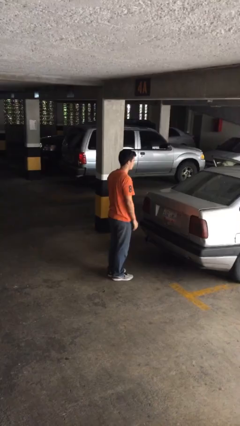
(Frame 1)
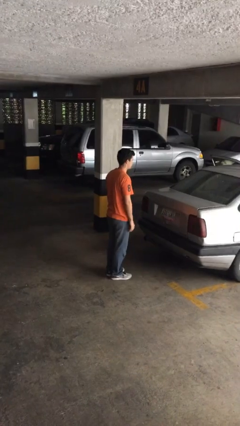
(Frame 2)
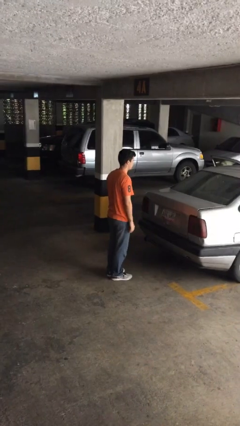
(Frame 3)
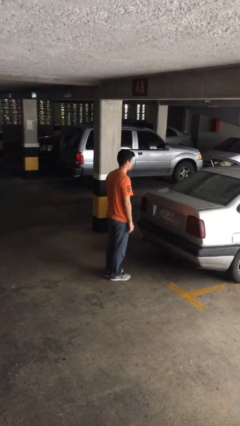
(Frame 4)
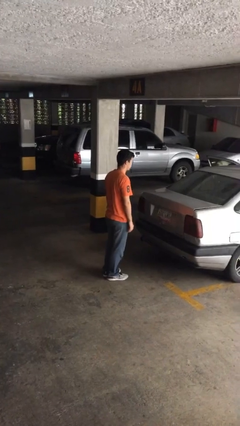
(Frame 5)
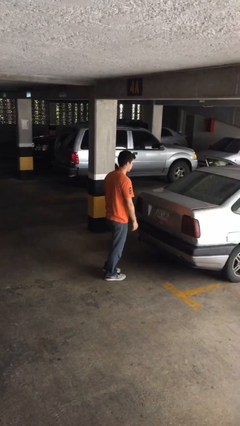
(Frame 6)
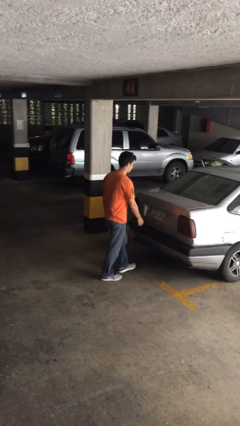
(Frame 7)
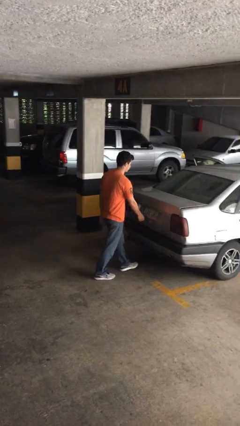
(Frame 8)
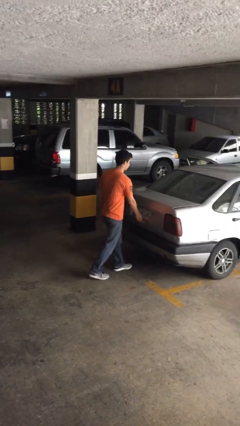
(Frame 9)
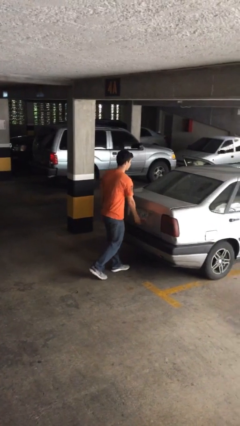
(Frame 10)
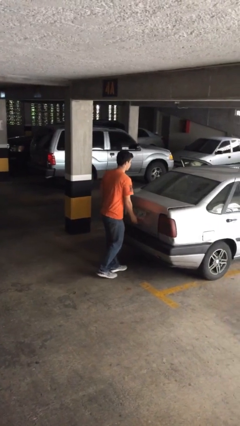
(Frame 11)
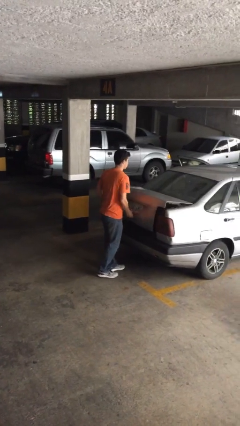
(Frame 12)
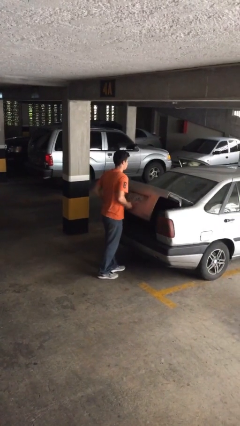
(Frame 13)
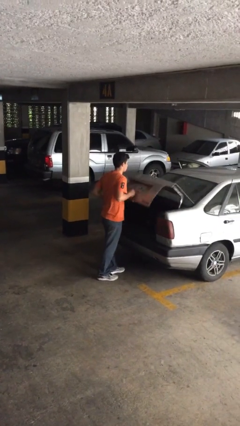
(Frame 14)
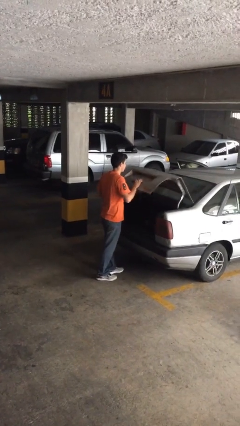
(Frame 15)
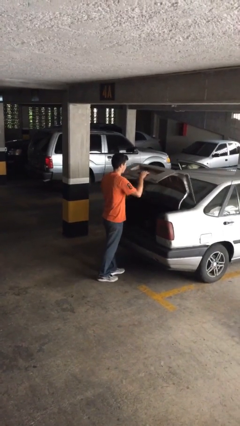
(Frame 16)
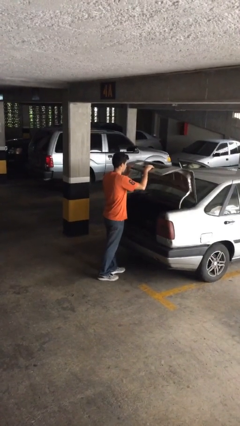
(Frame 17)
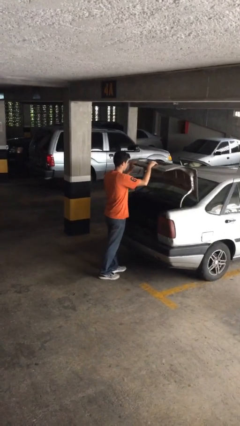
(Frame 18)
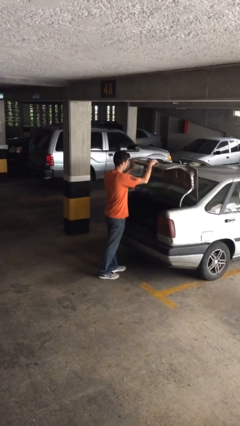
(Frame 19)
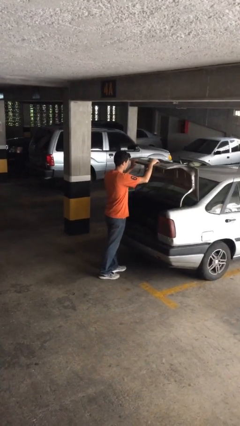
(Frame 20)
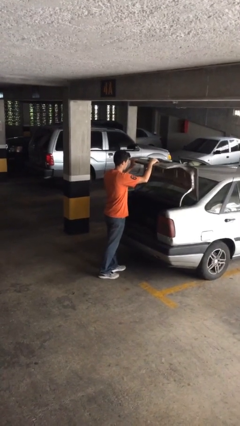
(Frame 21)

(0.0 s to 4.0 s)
person opens car trunk

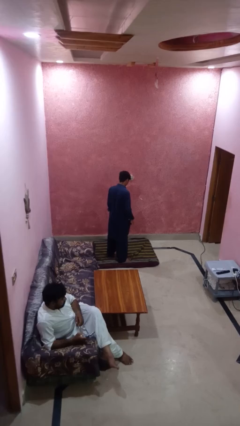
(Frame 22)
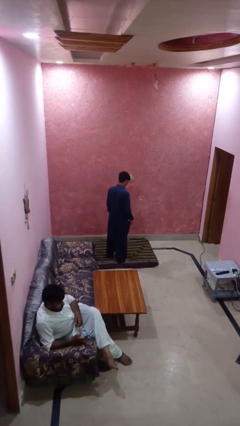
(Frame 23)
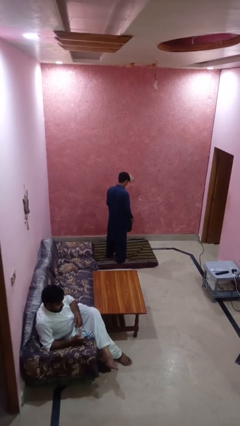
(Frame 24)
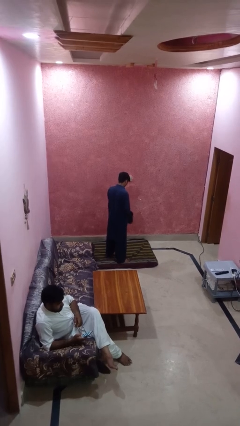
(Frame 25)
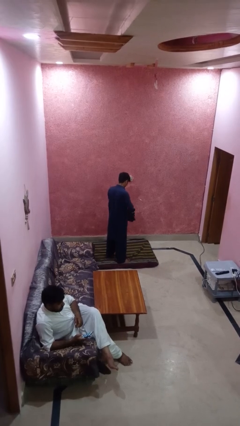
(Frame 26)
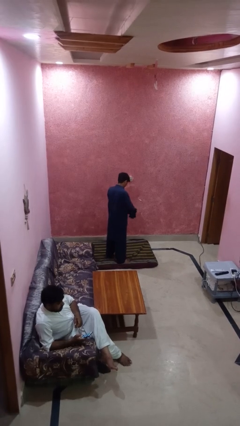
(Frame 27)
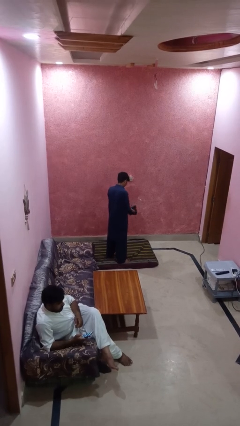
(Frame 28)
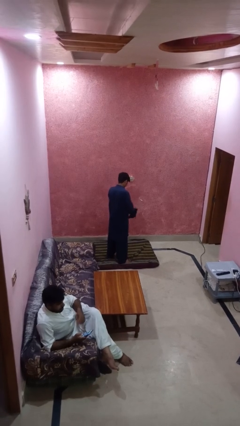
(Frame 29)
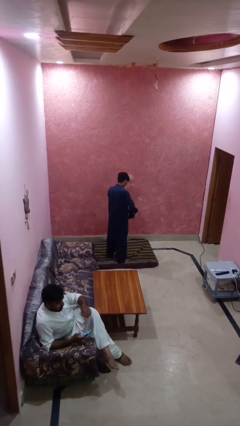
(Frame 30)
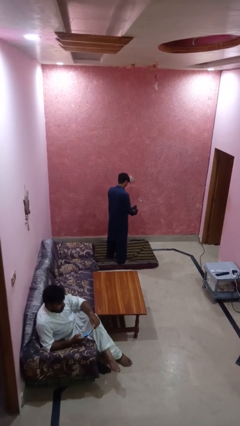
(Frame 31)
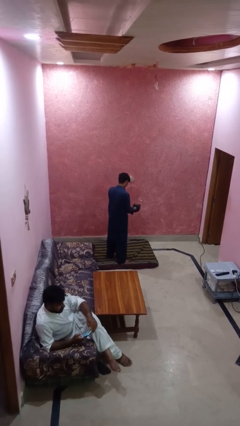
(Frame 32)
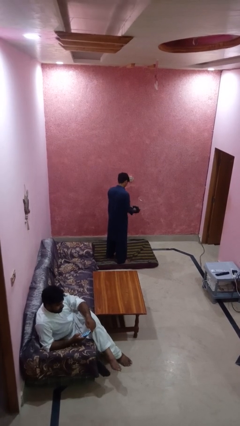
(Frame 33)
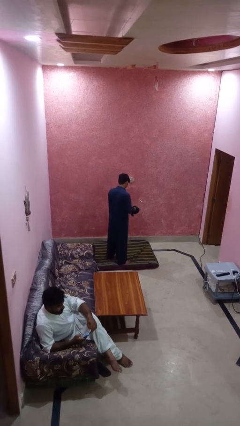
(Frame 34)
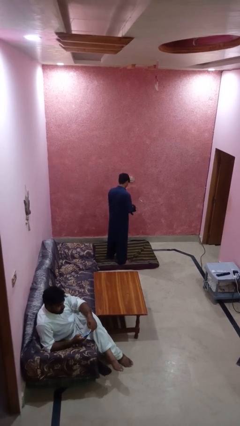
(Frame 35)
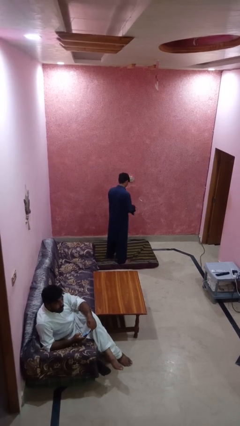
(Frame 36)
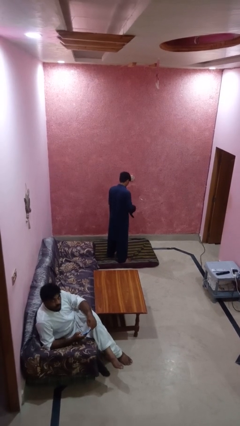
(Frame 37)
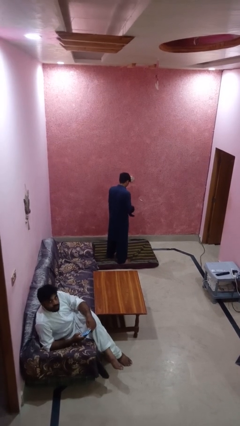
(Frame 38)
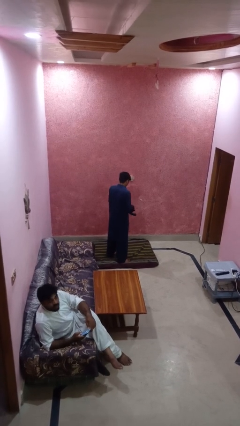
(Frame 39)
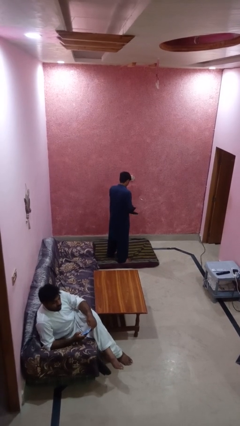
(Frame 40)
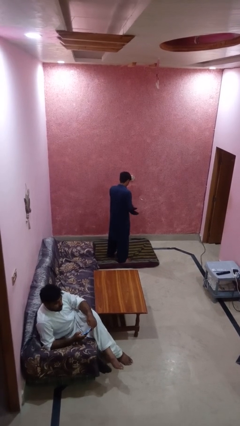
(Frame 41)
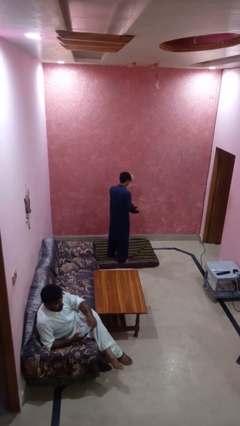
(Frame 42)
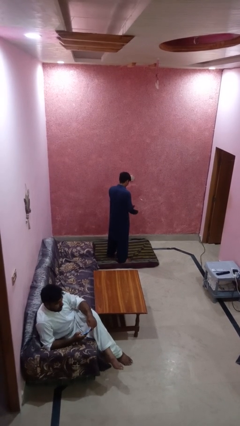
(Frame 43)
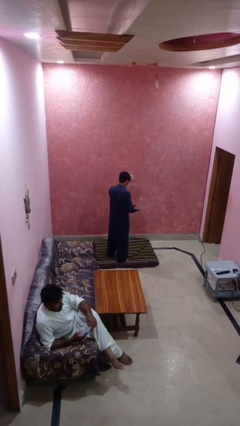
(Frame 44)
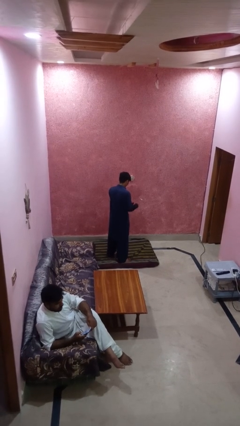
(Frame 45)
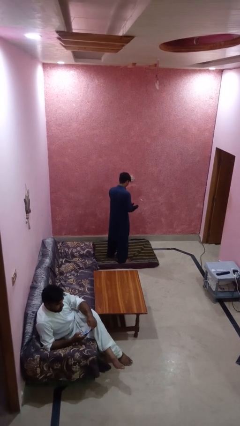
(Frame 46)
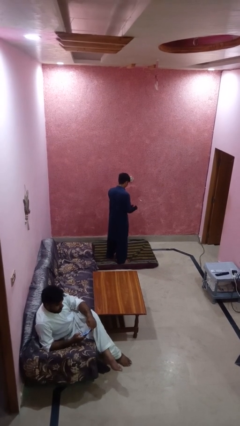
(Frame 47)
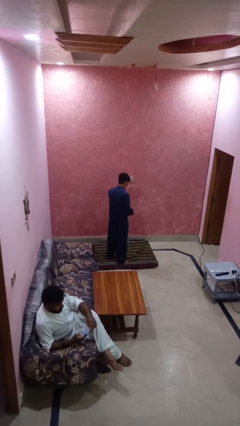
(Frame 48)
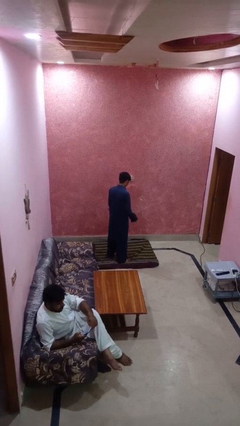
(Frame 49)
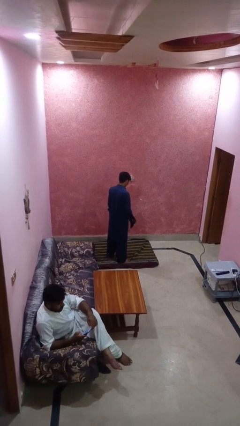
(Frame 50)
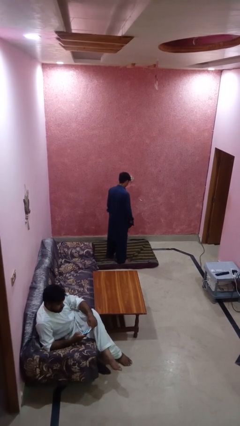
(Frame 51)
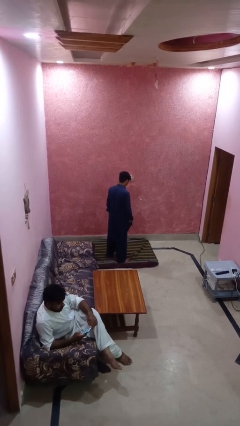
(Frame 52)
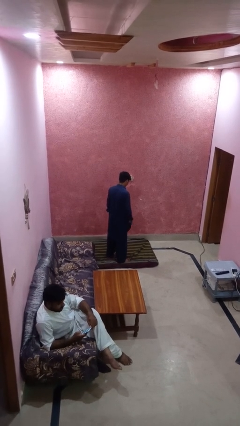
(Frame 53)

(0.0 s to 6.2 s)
person puts on gloves

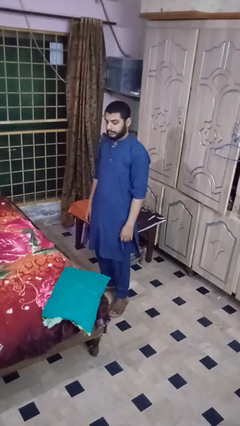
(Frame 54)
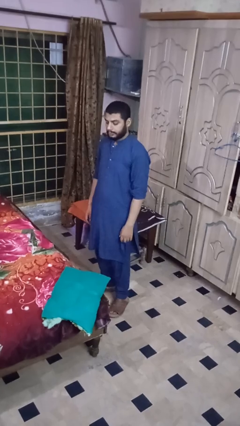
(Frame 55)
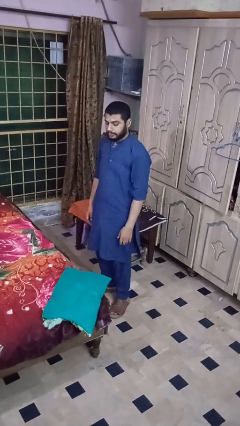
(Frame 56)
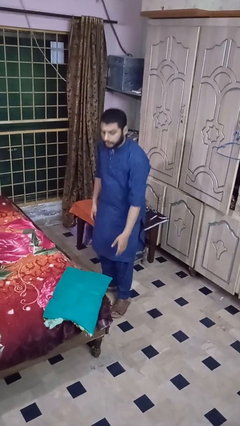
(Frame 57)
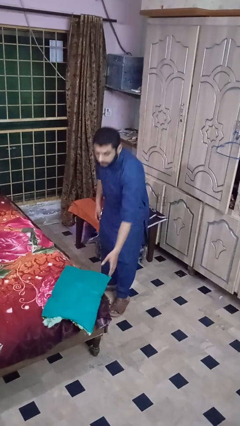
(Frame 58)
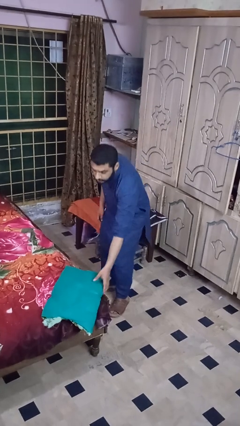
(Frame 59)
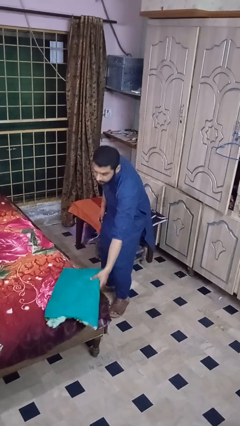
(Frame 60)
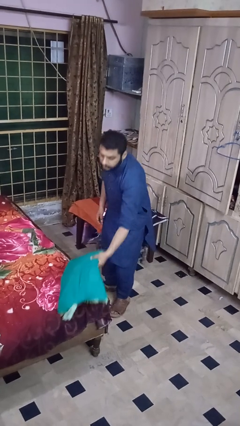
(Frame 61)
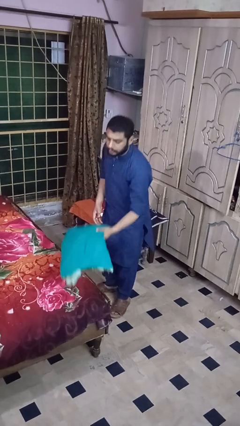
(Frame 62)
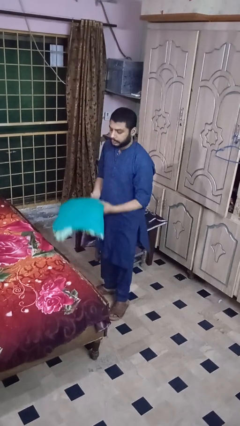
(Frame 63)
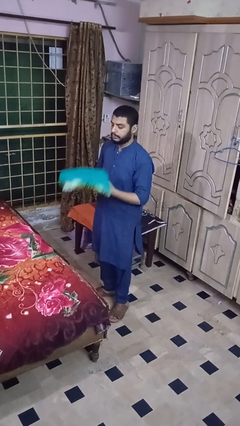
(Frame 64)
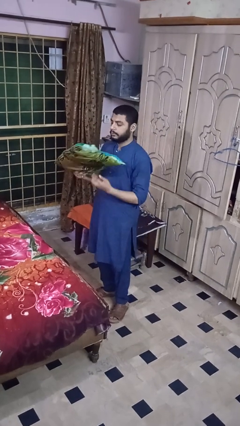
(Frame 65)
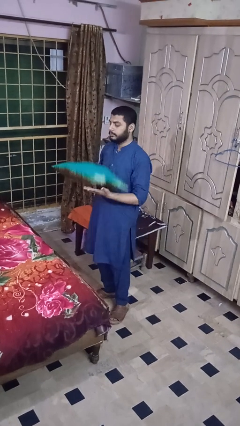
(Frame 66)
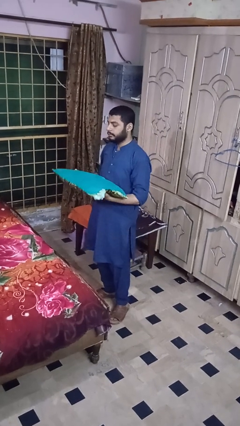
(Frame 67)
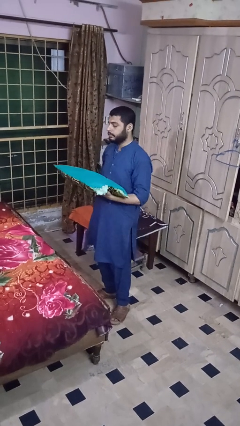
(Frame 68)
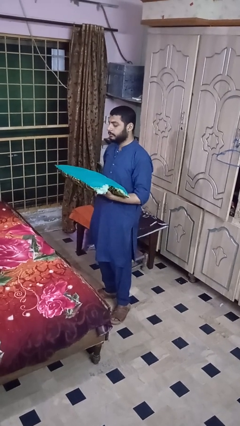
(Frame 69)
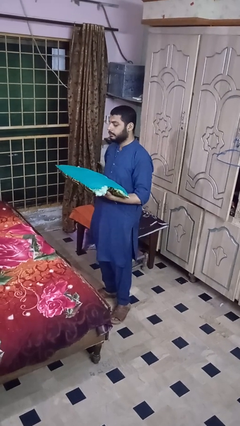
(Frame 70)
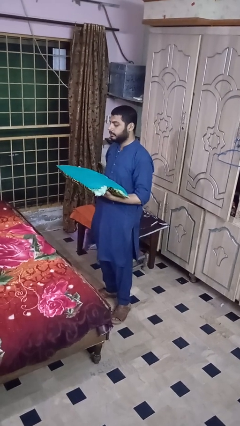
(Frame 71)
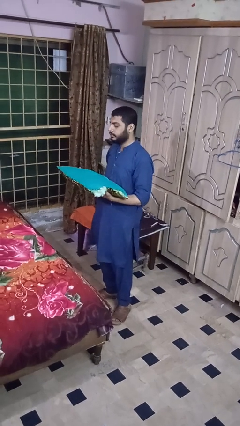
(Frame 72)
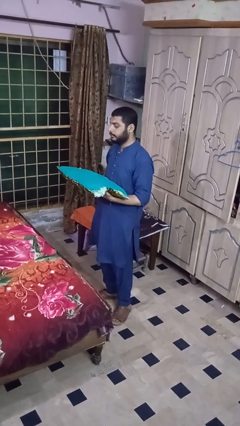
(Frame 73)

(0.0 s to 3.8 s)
person picks up object from bed

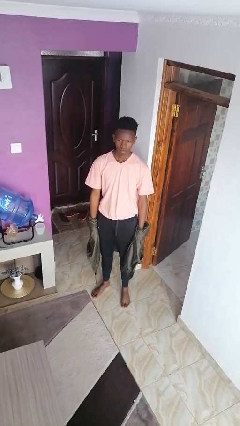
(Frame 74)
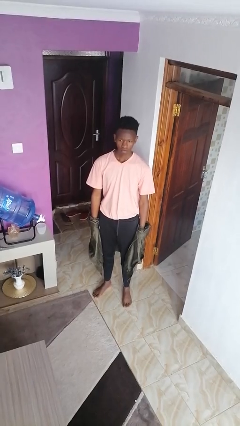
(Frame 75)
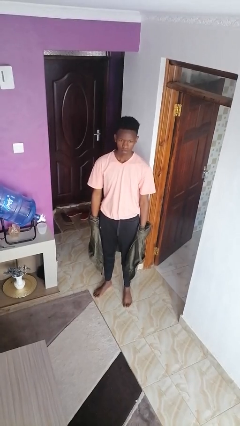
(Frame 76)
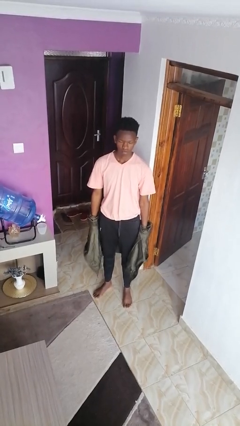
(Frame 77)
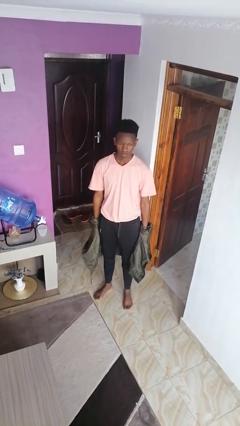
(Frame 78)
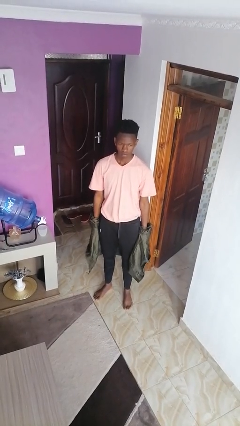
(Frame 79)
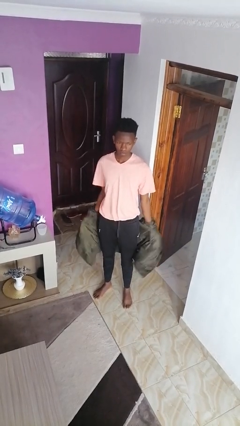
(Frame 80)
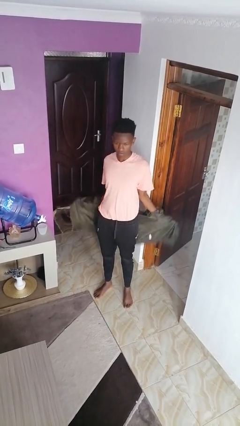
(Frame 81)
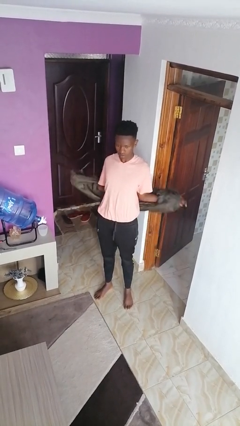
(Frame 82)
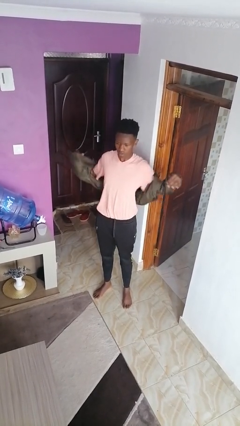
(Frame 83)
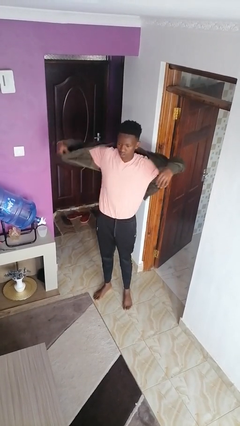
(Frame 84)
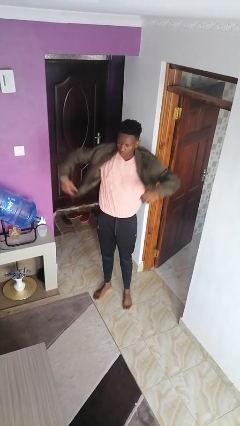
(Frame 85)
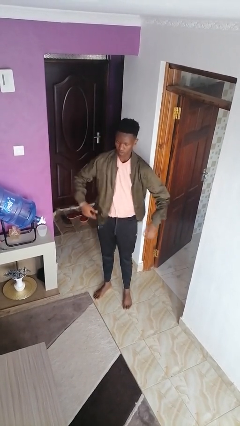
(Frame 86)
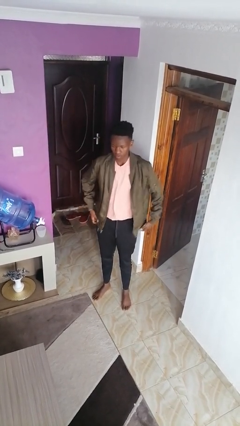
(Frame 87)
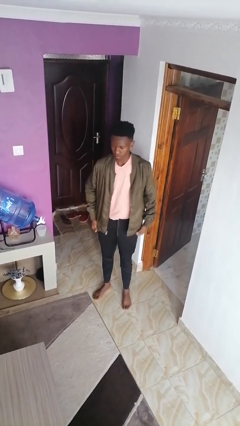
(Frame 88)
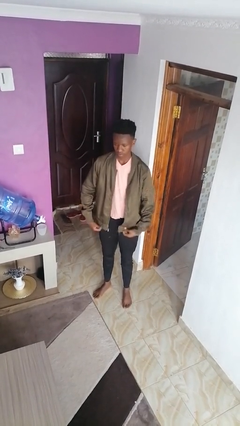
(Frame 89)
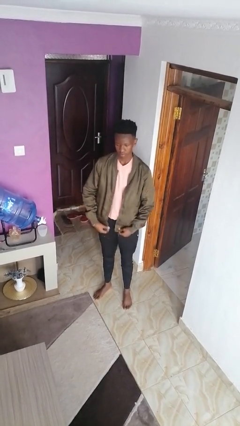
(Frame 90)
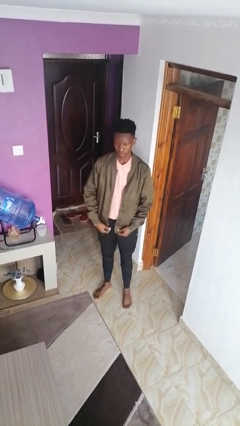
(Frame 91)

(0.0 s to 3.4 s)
person puts on jacket

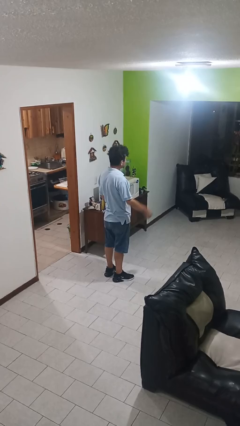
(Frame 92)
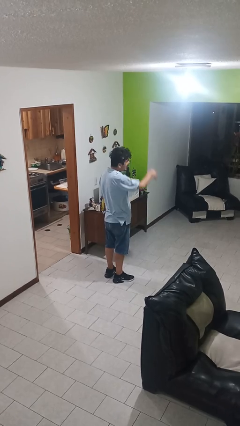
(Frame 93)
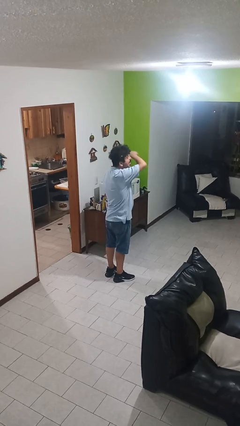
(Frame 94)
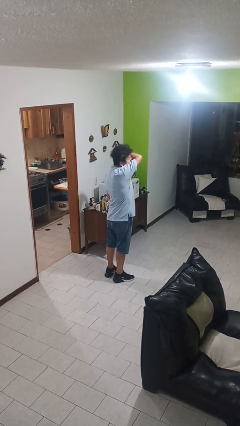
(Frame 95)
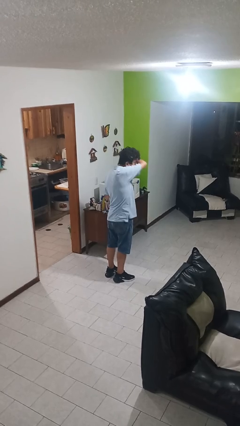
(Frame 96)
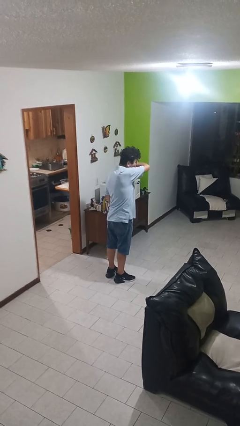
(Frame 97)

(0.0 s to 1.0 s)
person sneezes into arm
